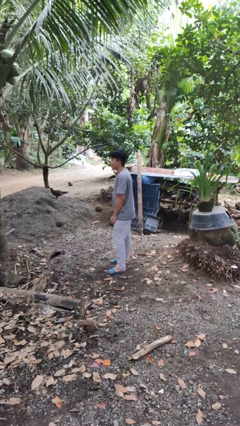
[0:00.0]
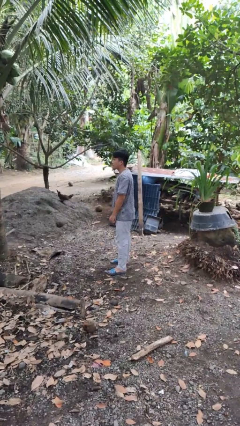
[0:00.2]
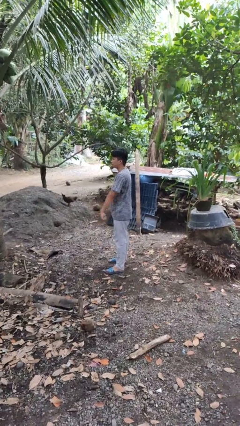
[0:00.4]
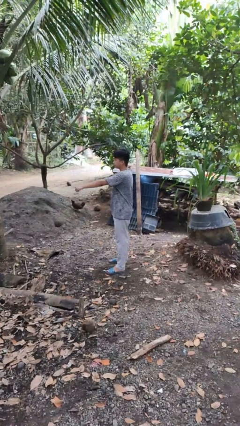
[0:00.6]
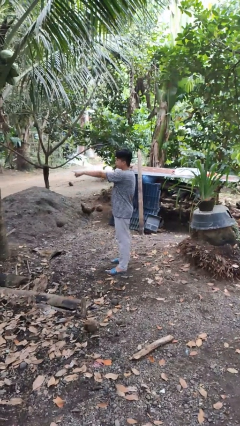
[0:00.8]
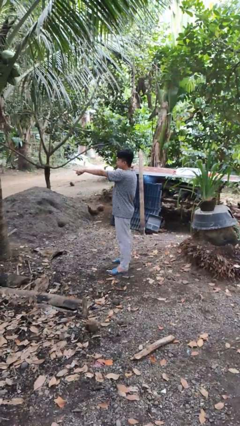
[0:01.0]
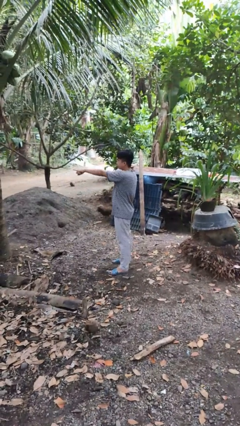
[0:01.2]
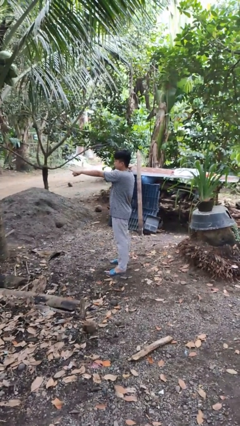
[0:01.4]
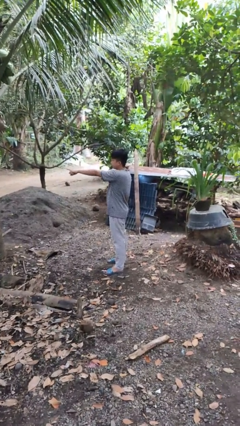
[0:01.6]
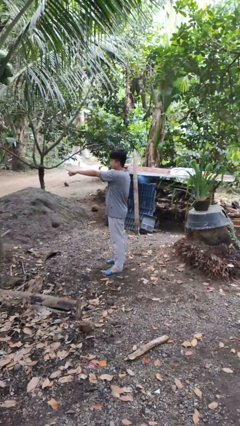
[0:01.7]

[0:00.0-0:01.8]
person points at person

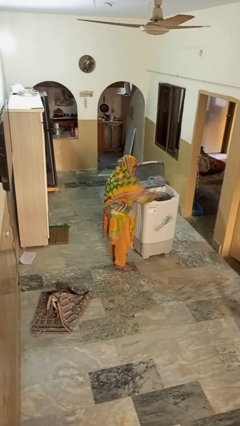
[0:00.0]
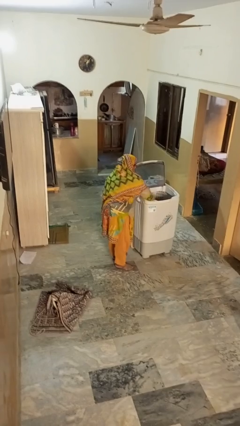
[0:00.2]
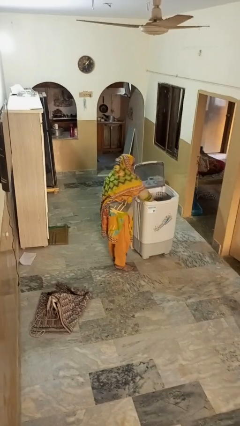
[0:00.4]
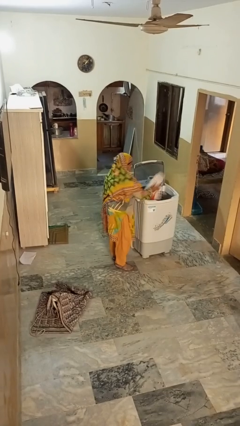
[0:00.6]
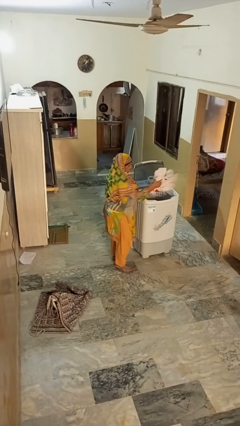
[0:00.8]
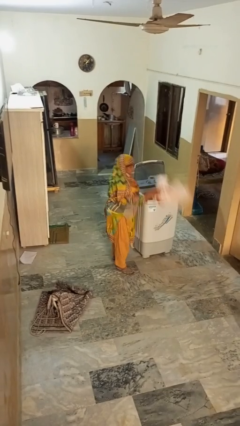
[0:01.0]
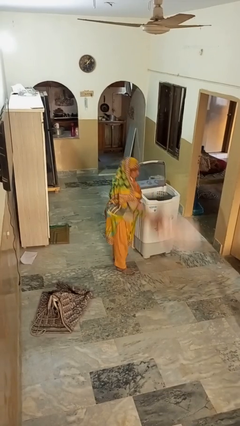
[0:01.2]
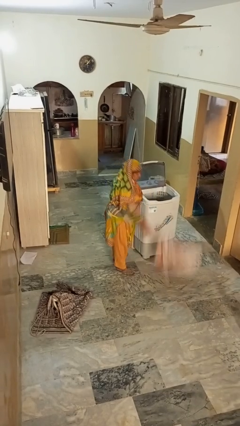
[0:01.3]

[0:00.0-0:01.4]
person unloads clotheswasher

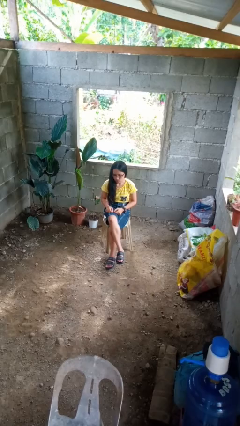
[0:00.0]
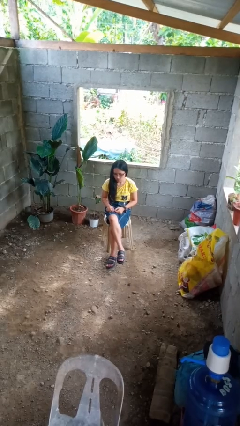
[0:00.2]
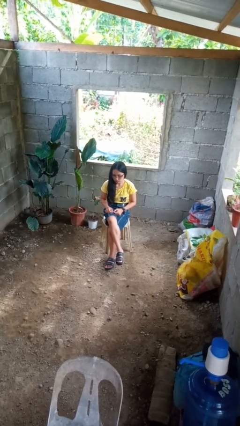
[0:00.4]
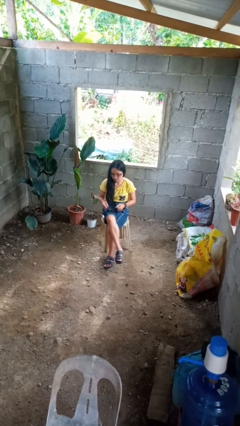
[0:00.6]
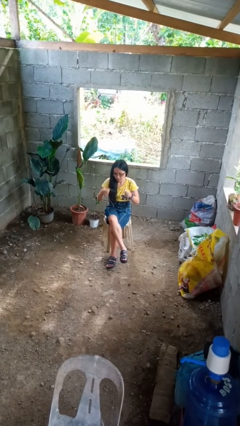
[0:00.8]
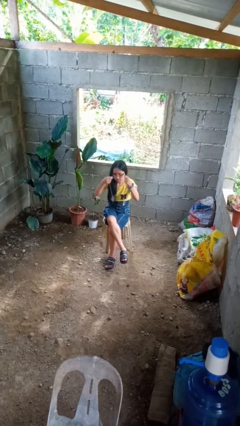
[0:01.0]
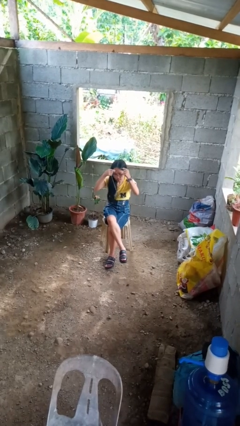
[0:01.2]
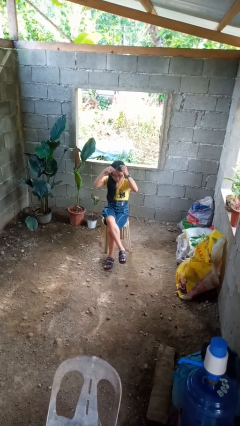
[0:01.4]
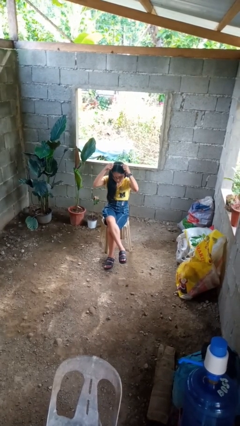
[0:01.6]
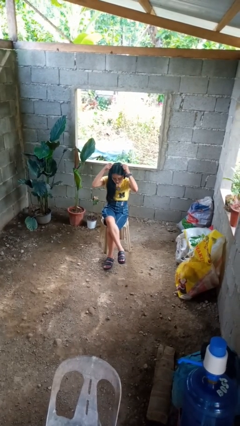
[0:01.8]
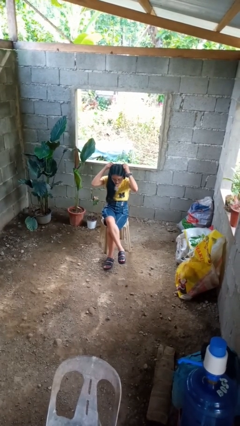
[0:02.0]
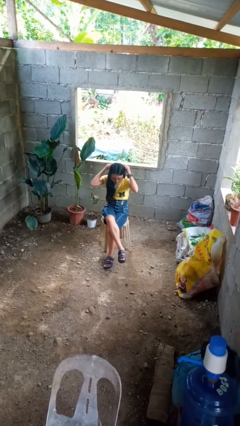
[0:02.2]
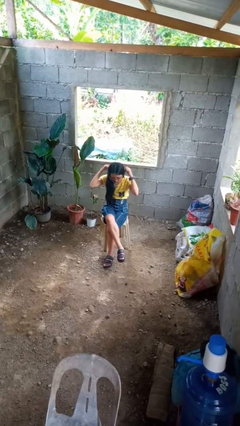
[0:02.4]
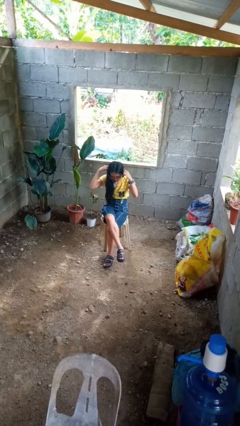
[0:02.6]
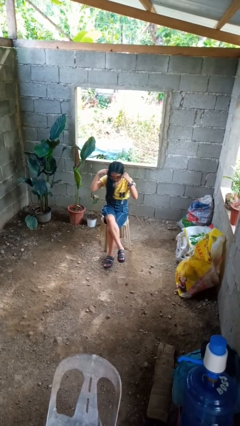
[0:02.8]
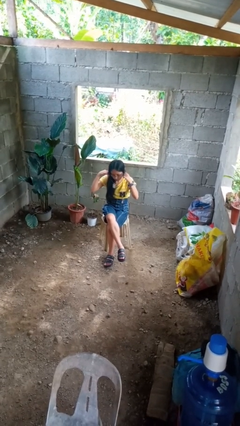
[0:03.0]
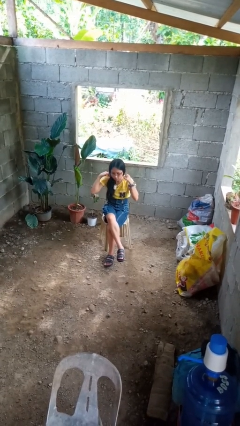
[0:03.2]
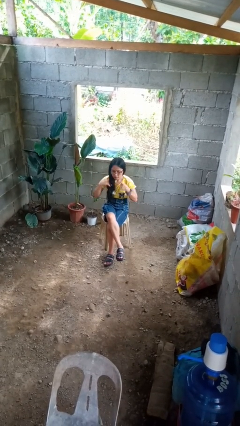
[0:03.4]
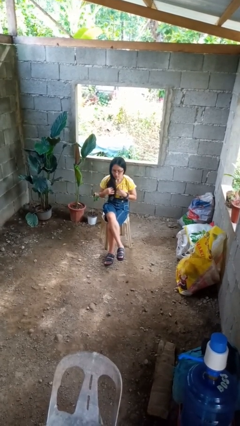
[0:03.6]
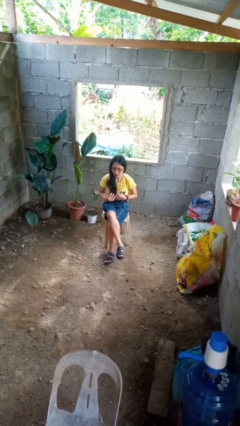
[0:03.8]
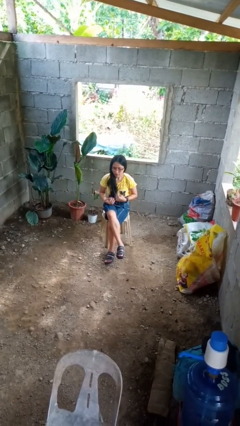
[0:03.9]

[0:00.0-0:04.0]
person puts on necklace

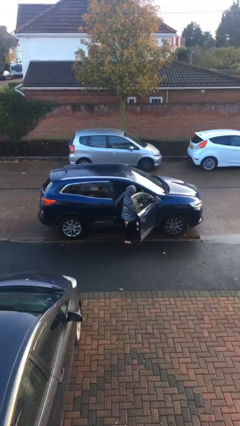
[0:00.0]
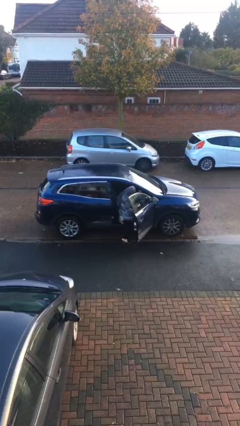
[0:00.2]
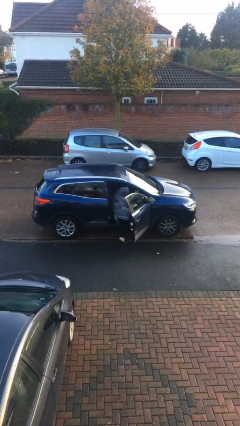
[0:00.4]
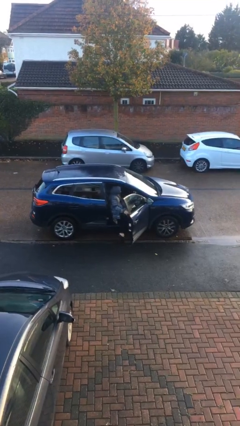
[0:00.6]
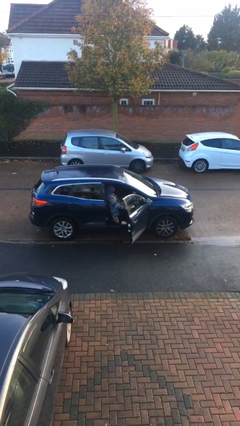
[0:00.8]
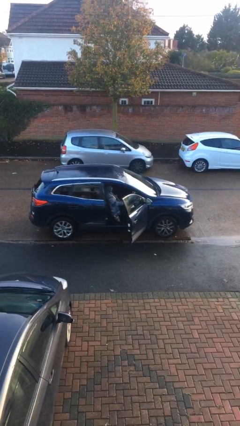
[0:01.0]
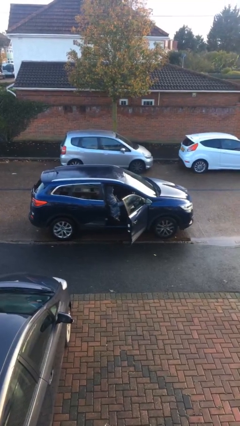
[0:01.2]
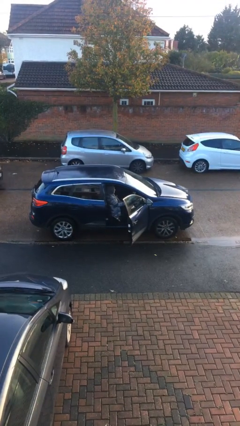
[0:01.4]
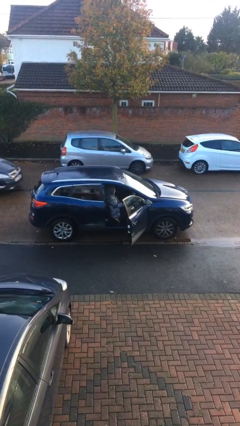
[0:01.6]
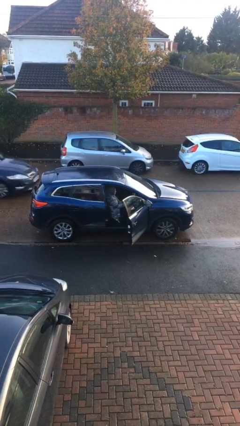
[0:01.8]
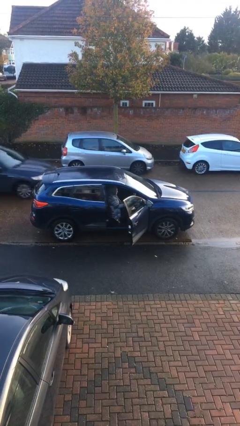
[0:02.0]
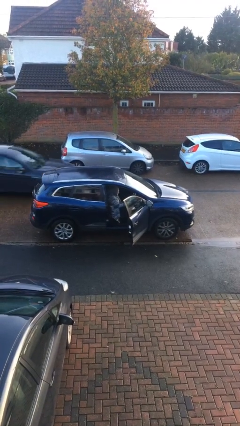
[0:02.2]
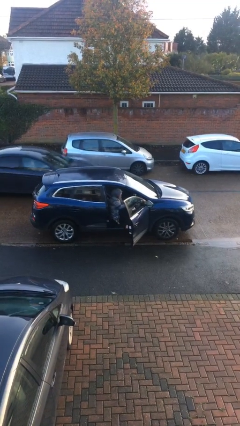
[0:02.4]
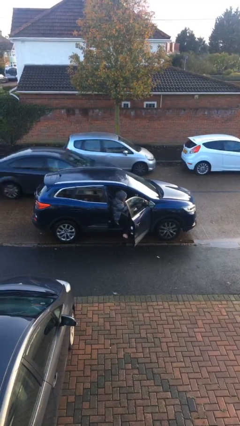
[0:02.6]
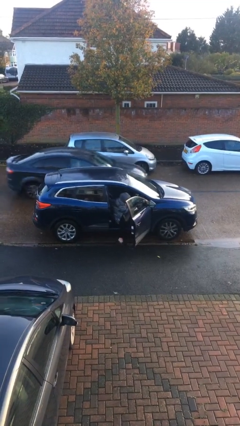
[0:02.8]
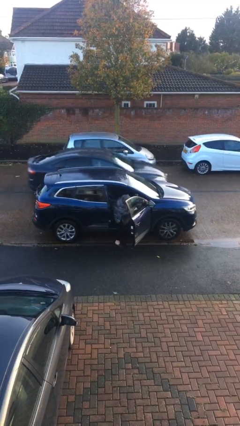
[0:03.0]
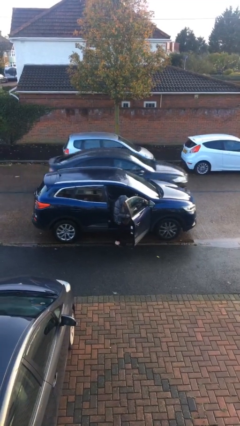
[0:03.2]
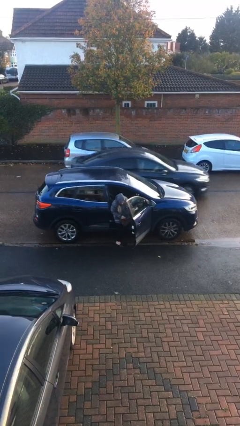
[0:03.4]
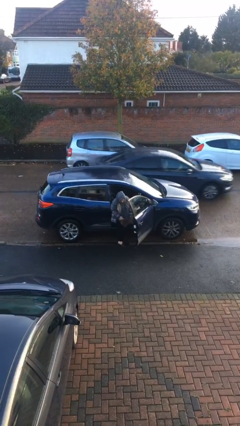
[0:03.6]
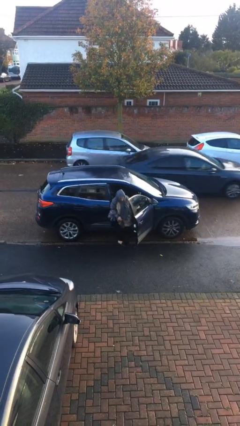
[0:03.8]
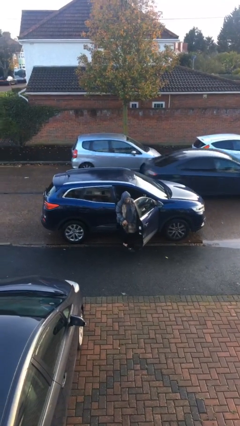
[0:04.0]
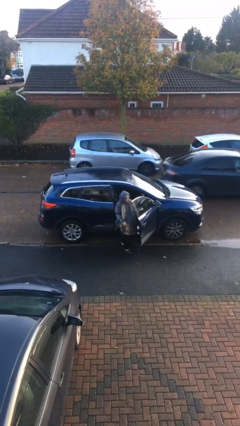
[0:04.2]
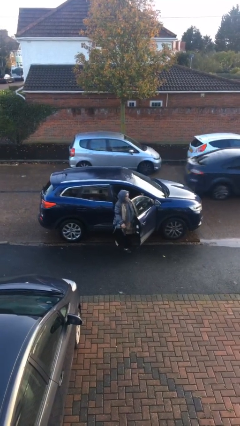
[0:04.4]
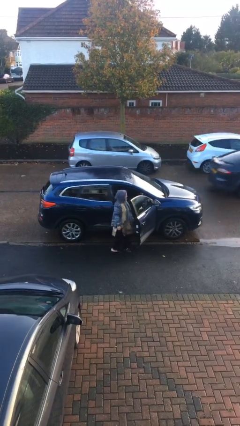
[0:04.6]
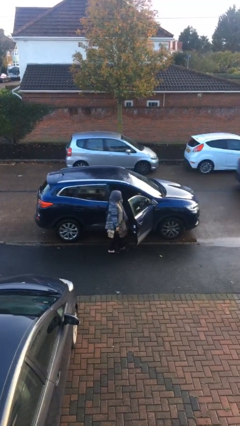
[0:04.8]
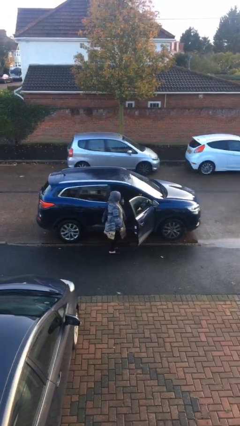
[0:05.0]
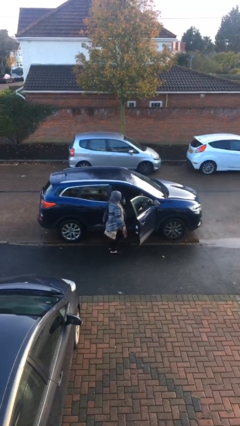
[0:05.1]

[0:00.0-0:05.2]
person exits car

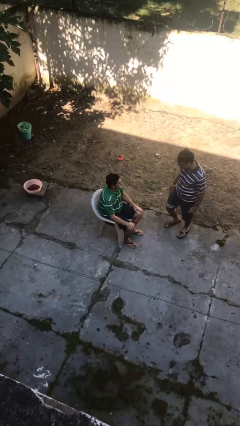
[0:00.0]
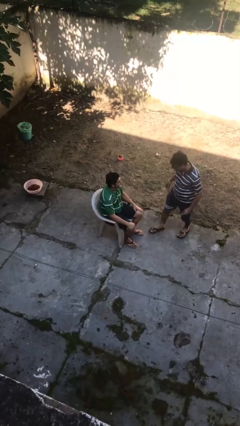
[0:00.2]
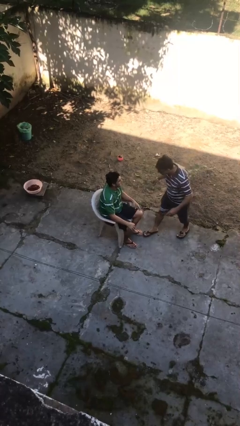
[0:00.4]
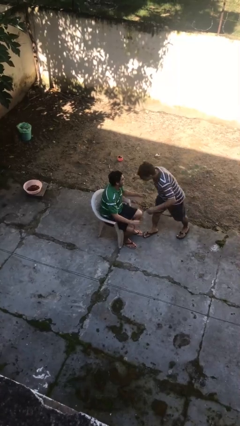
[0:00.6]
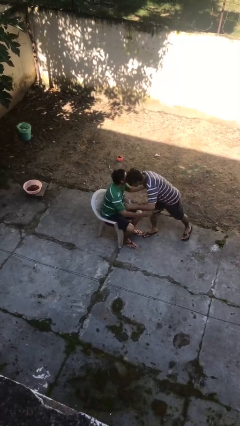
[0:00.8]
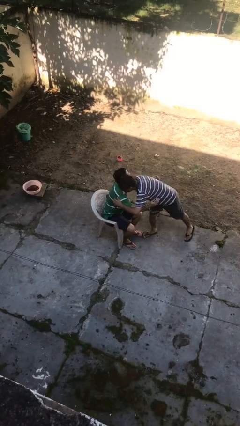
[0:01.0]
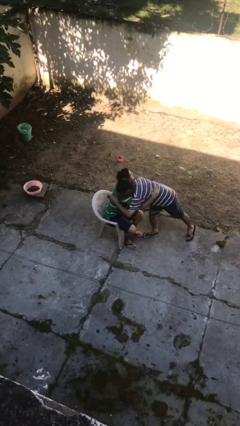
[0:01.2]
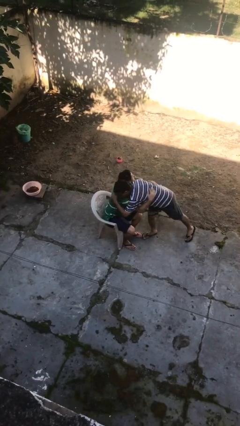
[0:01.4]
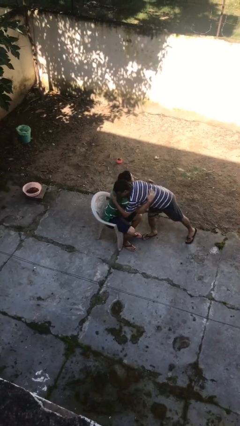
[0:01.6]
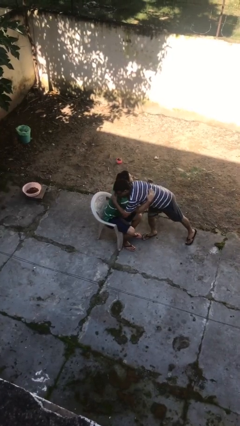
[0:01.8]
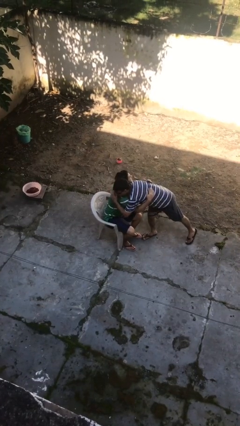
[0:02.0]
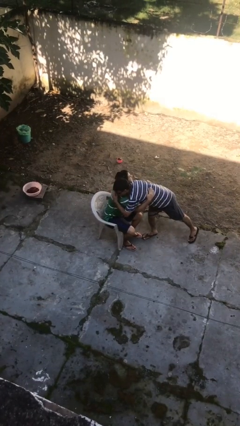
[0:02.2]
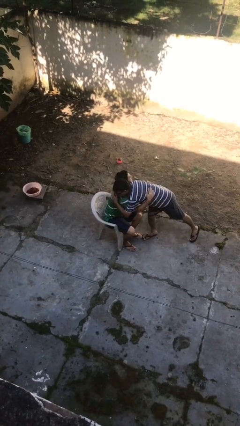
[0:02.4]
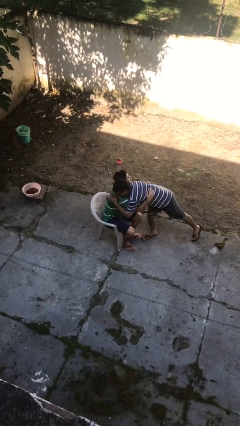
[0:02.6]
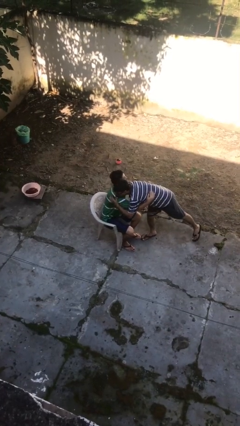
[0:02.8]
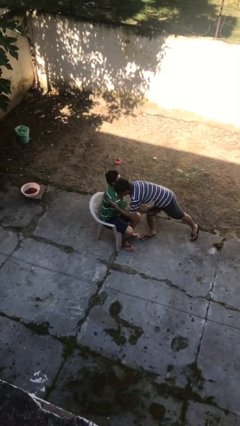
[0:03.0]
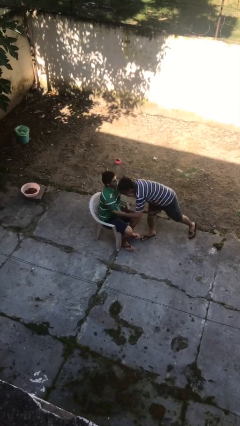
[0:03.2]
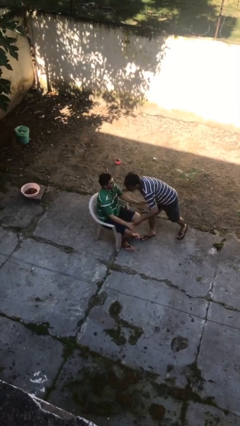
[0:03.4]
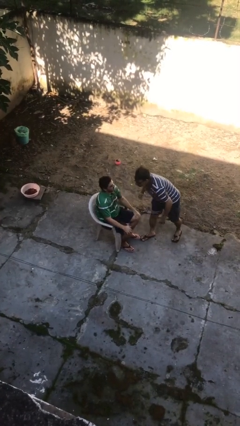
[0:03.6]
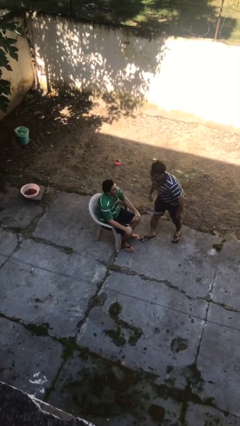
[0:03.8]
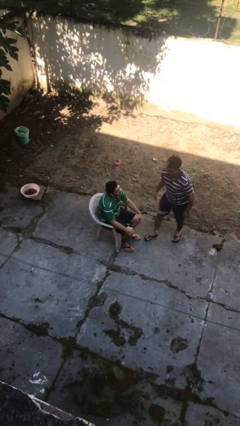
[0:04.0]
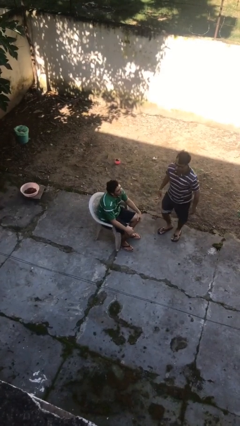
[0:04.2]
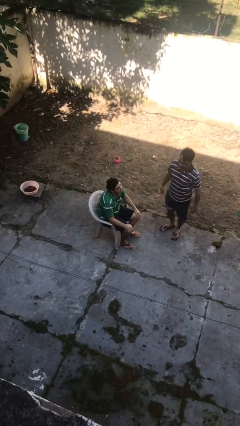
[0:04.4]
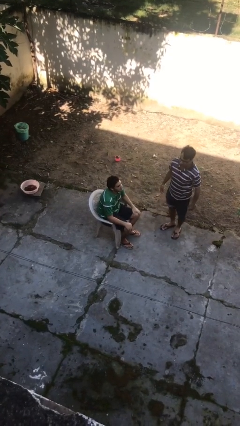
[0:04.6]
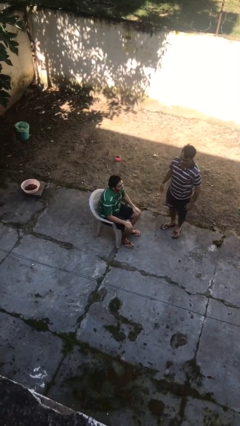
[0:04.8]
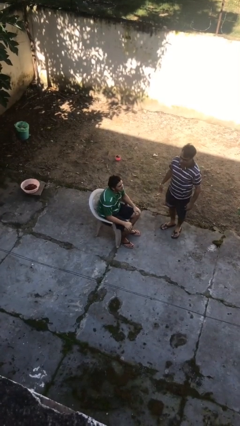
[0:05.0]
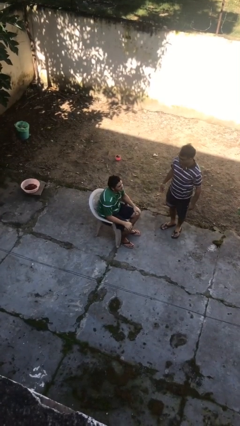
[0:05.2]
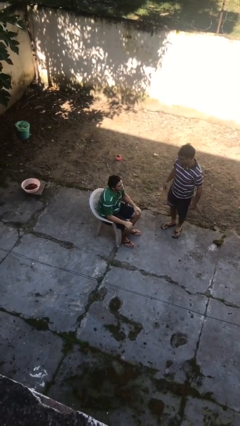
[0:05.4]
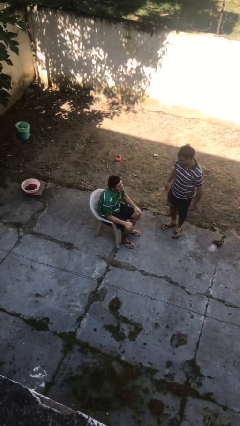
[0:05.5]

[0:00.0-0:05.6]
person embraces person
